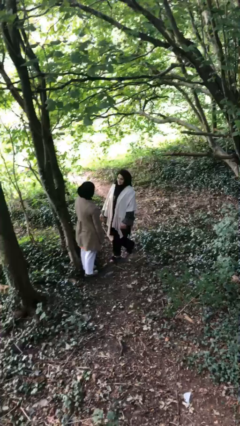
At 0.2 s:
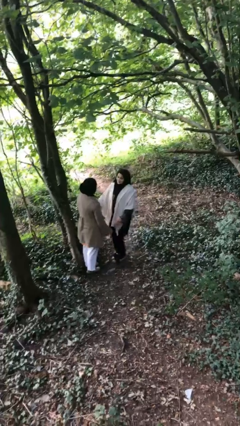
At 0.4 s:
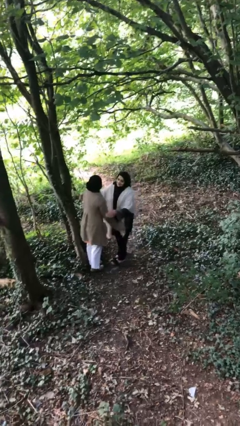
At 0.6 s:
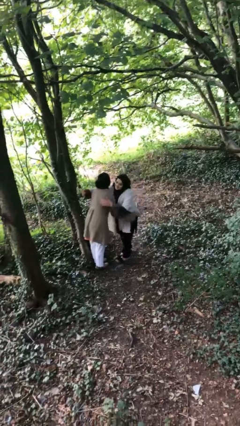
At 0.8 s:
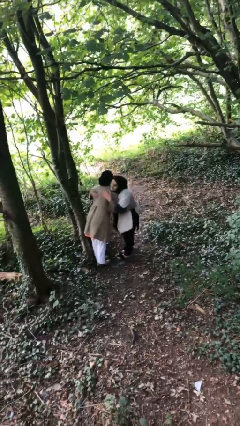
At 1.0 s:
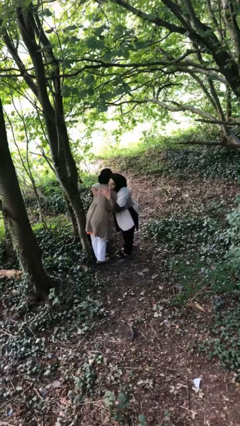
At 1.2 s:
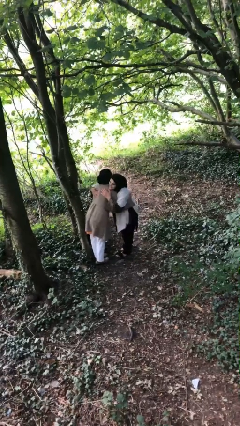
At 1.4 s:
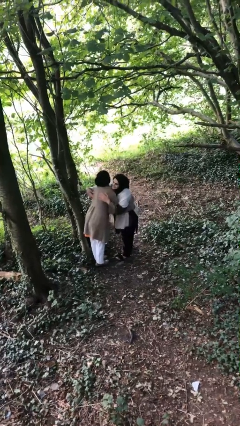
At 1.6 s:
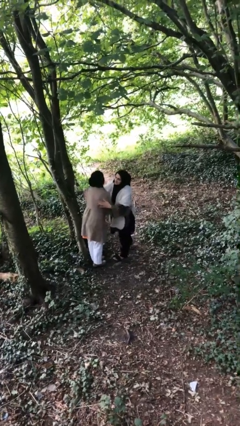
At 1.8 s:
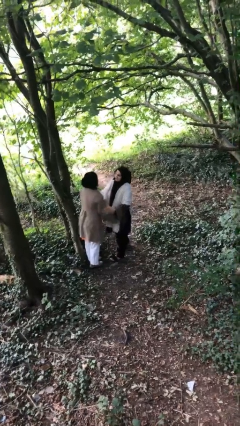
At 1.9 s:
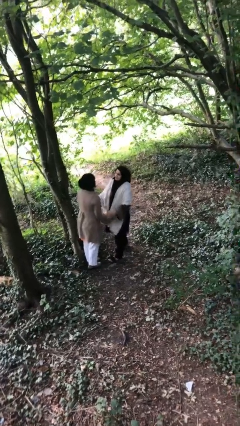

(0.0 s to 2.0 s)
person embraces person

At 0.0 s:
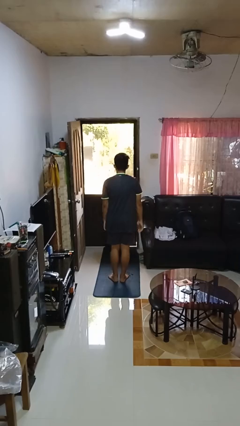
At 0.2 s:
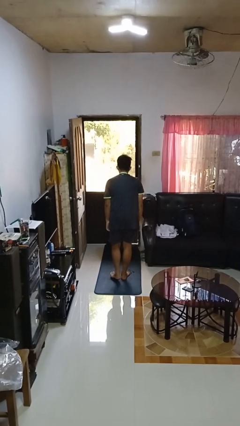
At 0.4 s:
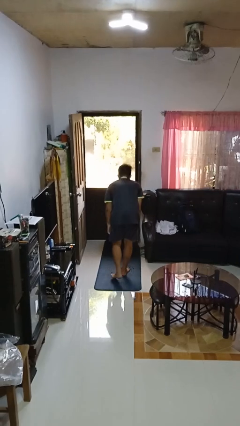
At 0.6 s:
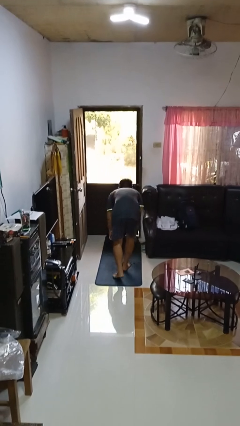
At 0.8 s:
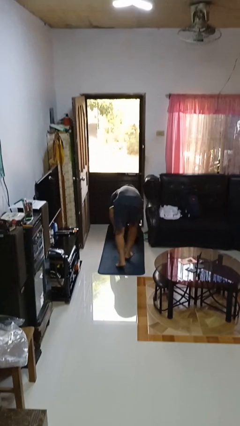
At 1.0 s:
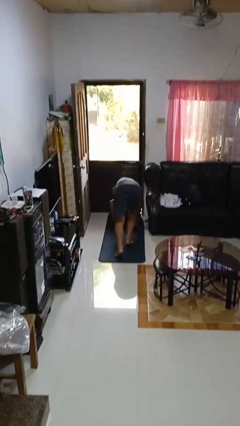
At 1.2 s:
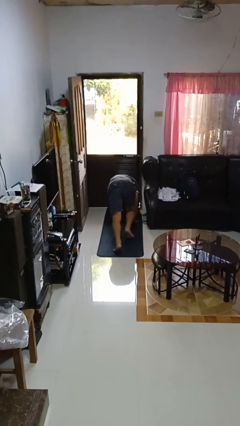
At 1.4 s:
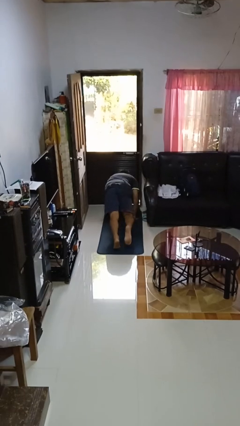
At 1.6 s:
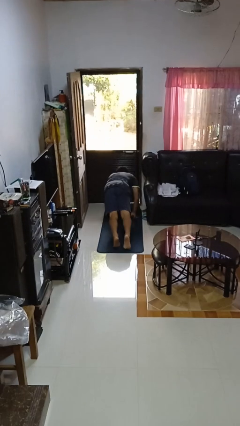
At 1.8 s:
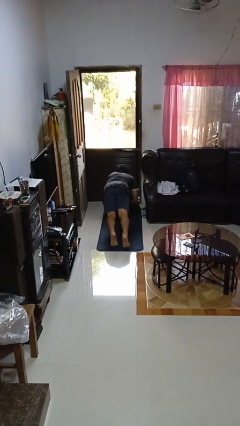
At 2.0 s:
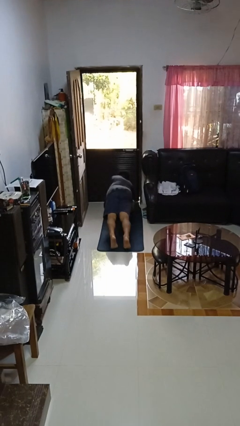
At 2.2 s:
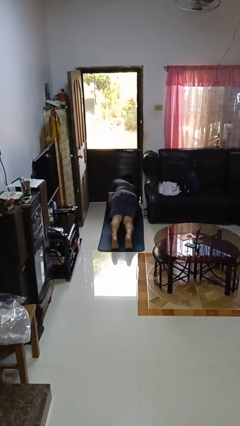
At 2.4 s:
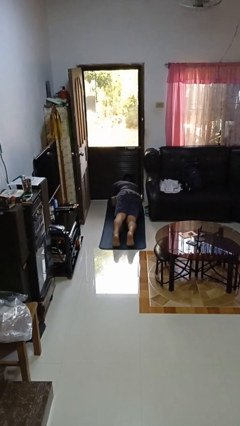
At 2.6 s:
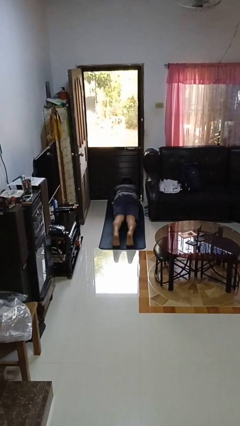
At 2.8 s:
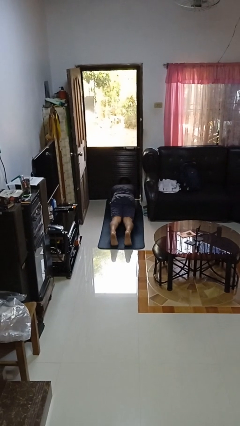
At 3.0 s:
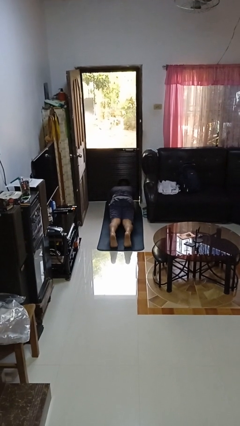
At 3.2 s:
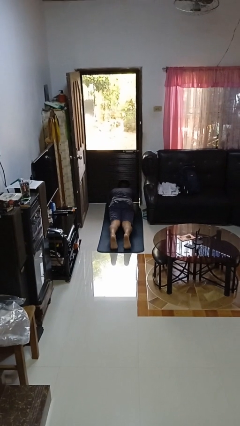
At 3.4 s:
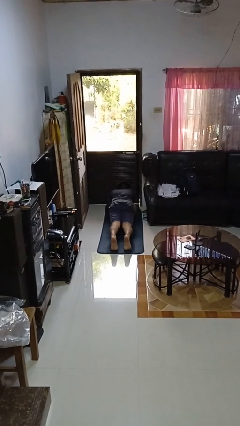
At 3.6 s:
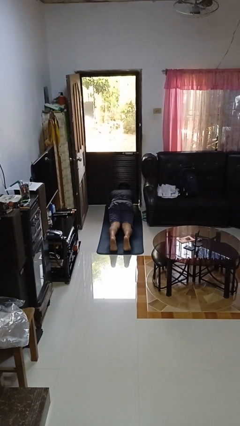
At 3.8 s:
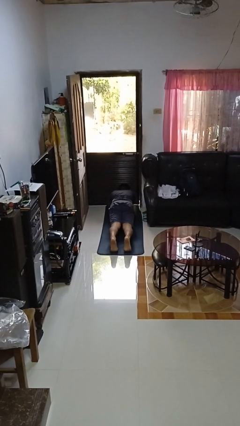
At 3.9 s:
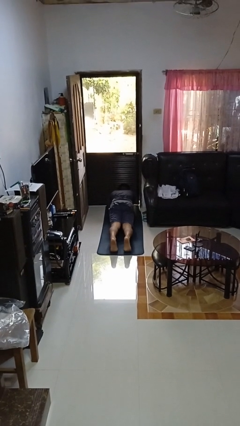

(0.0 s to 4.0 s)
person exercises with plank

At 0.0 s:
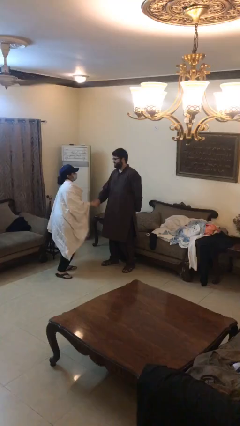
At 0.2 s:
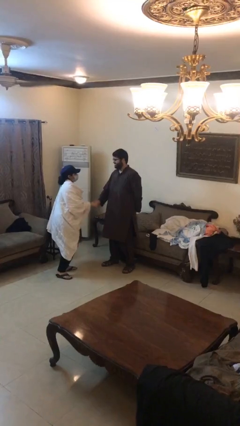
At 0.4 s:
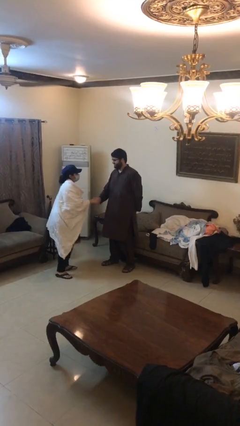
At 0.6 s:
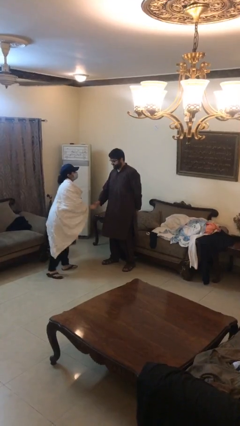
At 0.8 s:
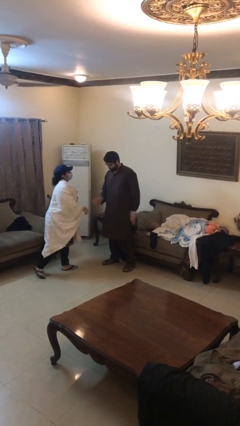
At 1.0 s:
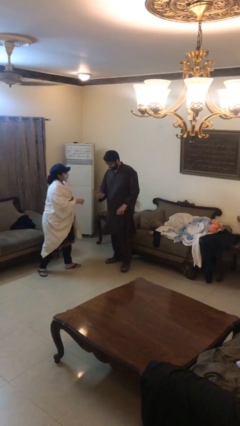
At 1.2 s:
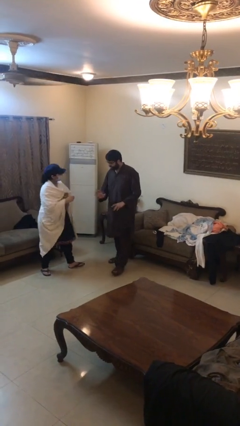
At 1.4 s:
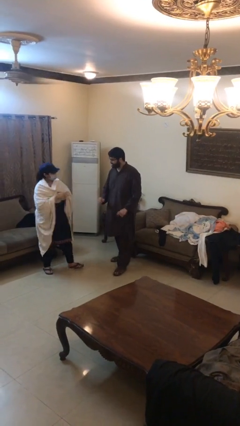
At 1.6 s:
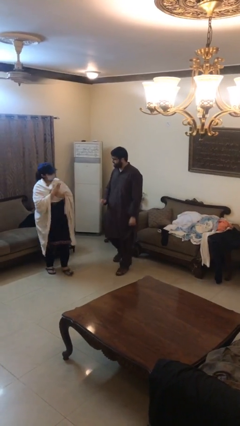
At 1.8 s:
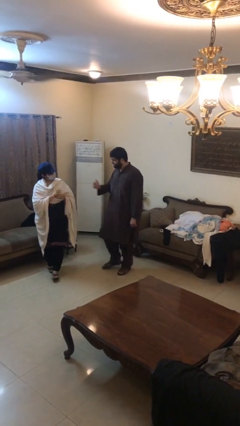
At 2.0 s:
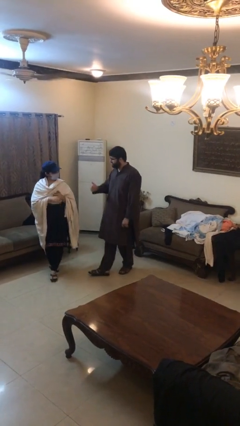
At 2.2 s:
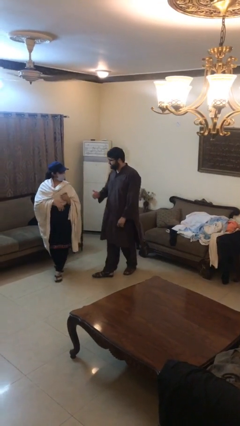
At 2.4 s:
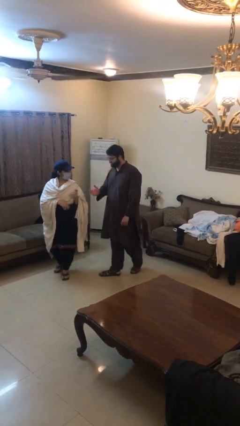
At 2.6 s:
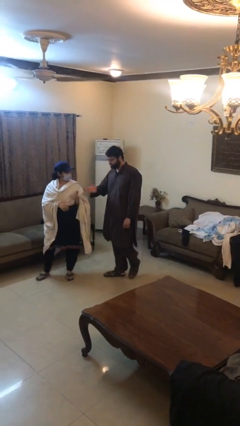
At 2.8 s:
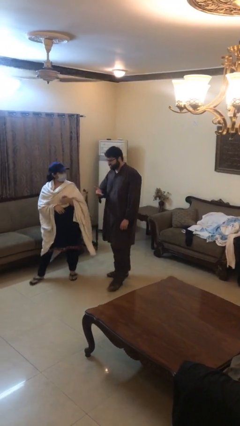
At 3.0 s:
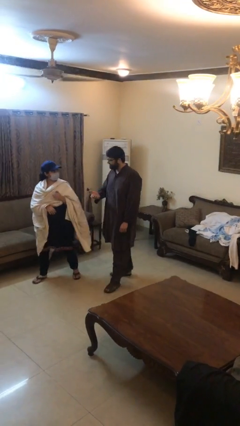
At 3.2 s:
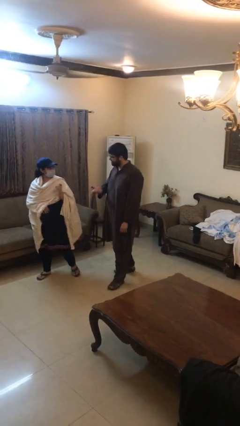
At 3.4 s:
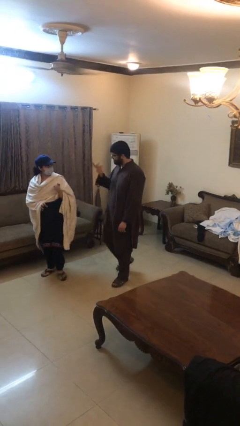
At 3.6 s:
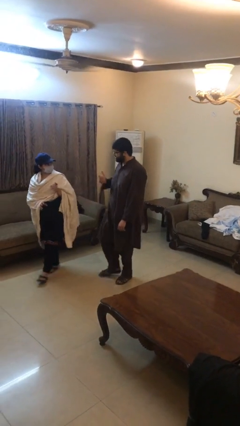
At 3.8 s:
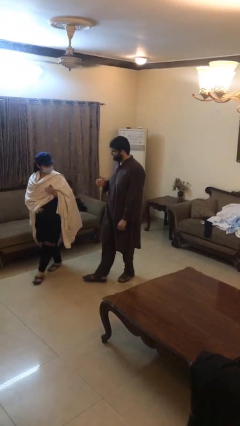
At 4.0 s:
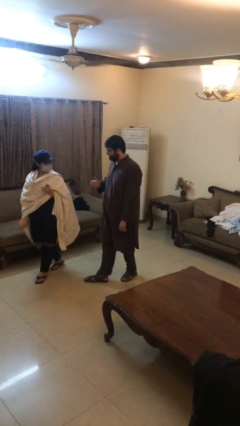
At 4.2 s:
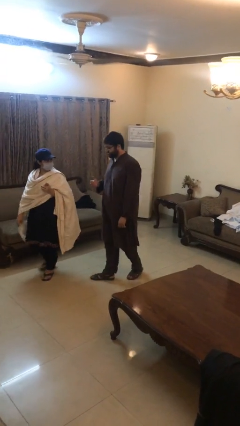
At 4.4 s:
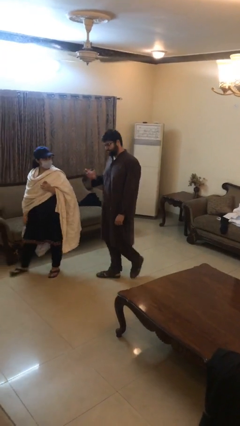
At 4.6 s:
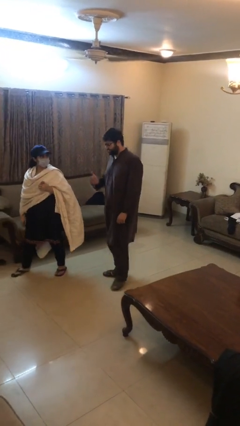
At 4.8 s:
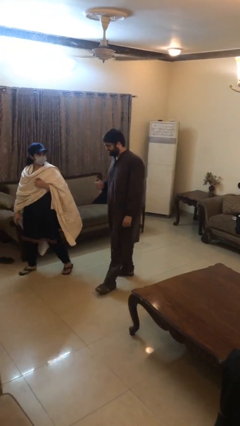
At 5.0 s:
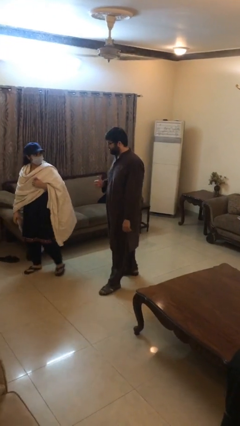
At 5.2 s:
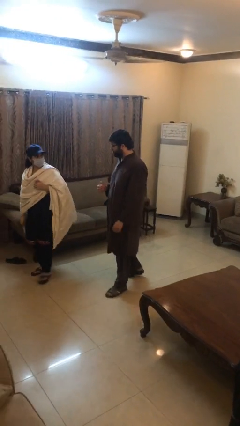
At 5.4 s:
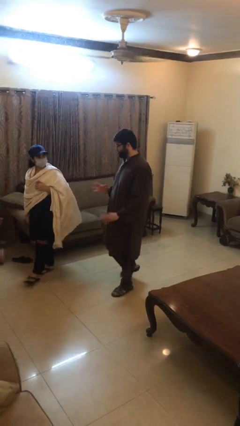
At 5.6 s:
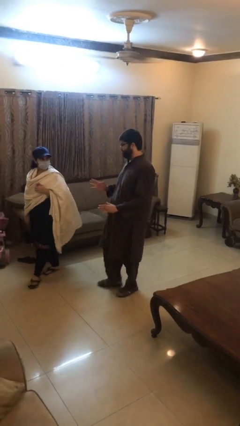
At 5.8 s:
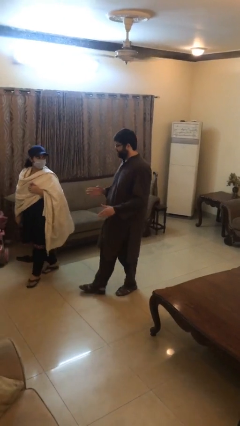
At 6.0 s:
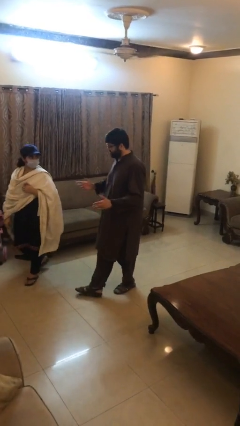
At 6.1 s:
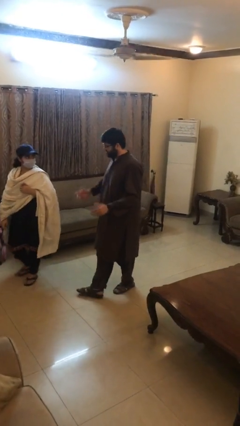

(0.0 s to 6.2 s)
person talks to person

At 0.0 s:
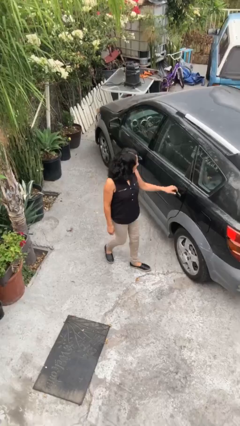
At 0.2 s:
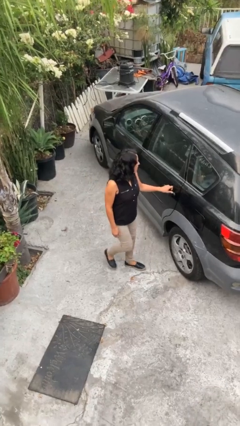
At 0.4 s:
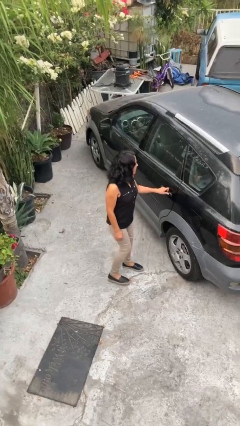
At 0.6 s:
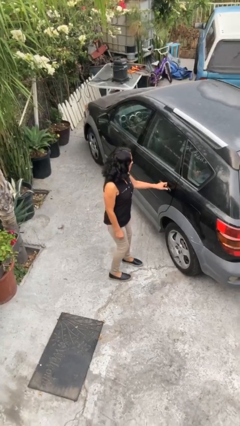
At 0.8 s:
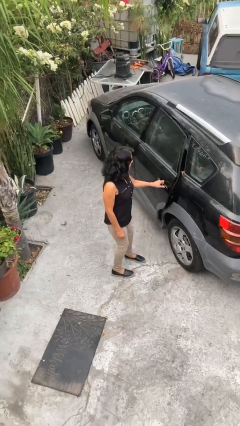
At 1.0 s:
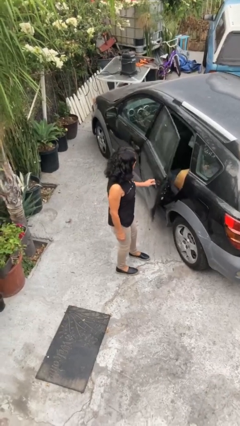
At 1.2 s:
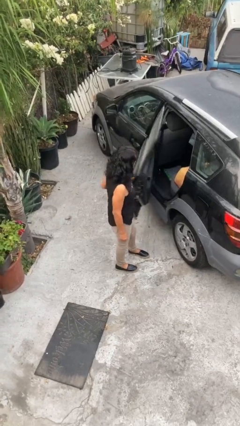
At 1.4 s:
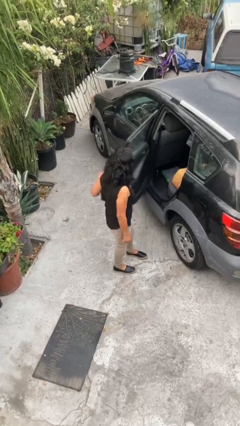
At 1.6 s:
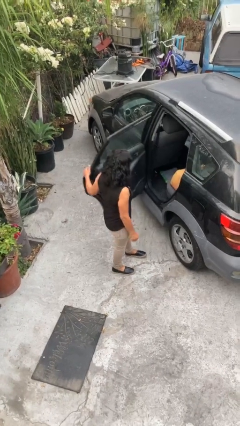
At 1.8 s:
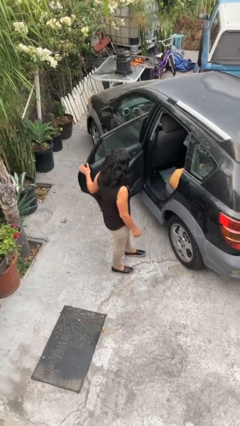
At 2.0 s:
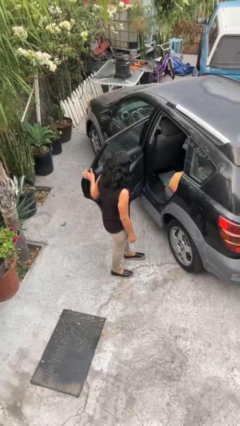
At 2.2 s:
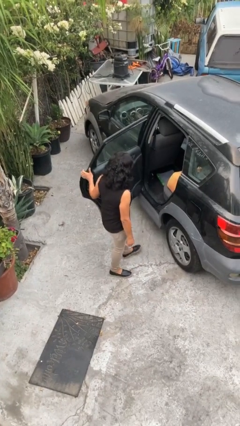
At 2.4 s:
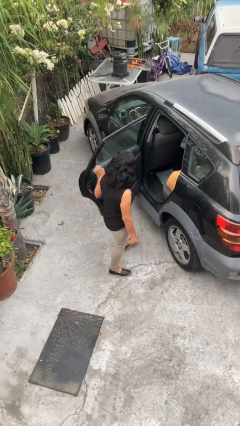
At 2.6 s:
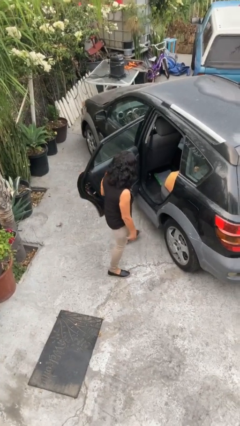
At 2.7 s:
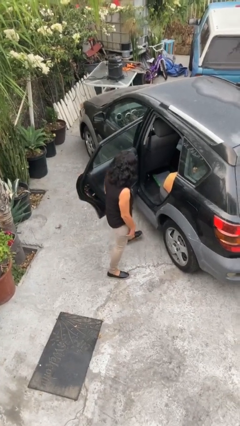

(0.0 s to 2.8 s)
person opens car door

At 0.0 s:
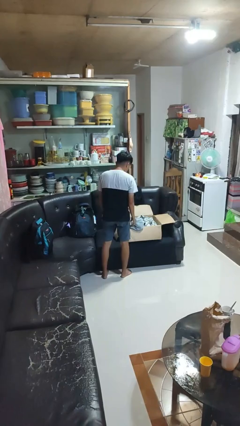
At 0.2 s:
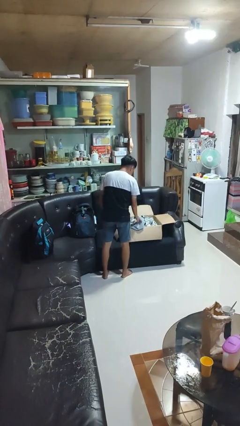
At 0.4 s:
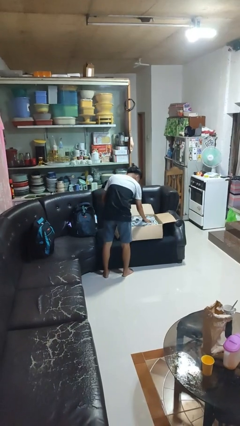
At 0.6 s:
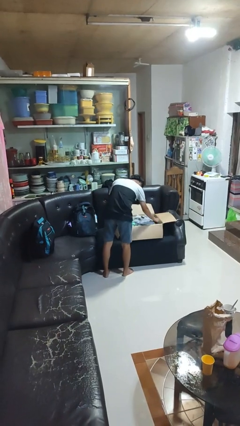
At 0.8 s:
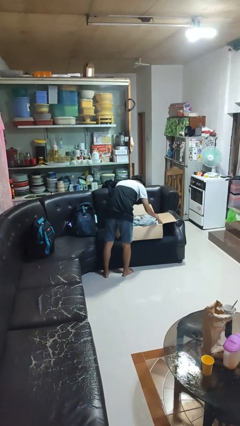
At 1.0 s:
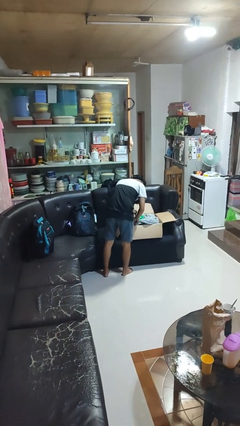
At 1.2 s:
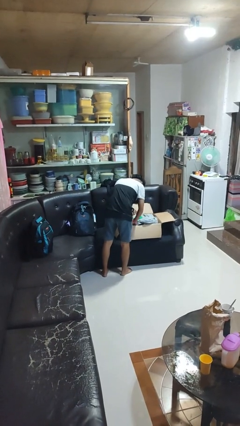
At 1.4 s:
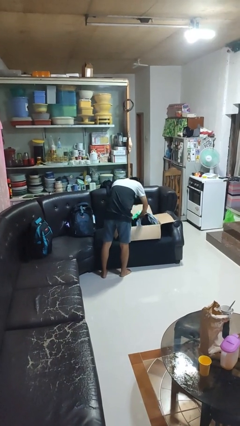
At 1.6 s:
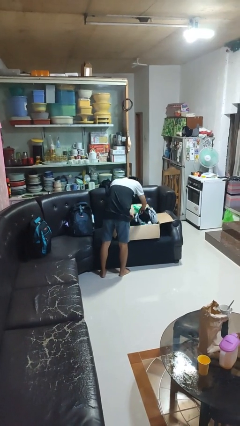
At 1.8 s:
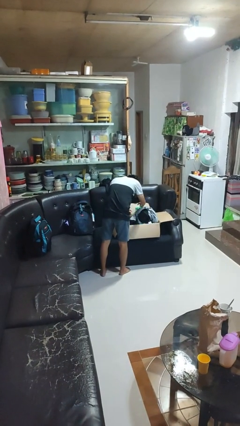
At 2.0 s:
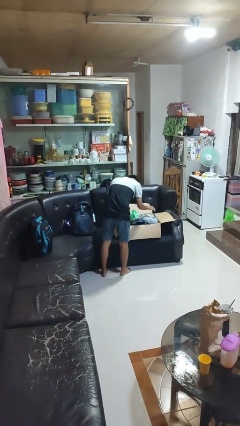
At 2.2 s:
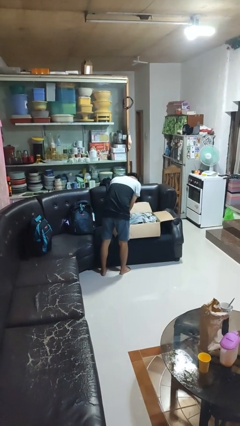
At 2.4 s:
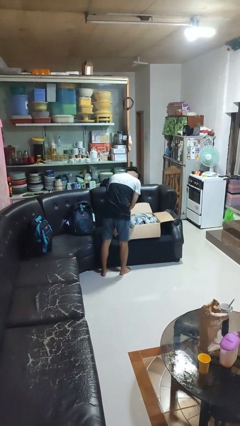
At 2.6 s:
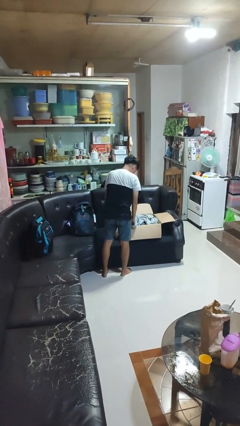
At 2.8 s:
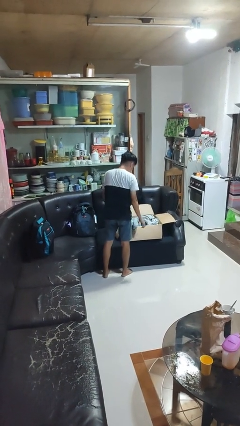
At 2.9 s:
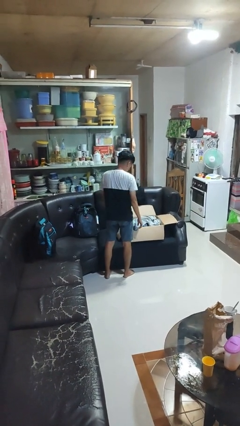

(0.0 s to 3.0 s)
person searches in box
